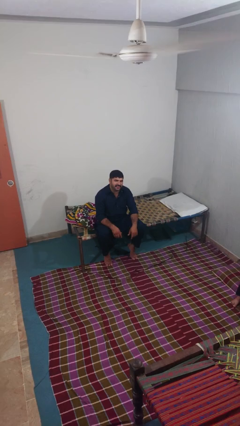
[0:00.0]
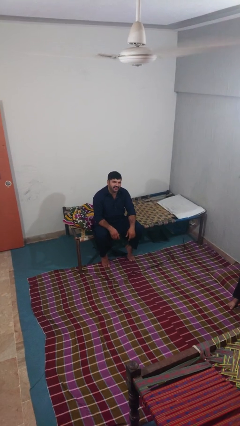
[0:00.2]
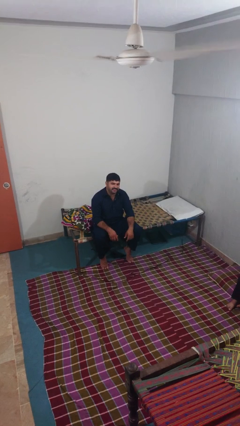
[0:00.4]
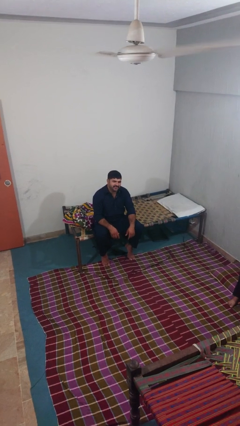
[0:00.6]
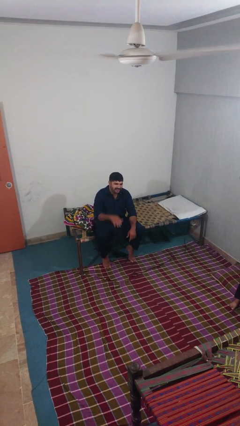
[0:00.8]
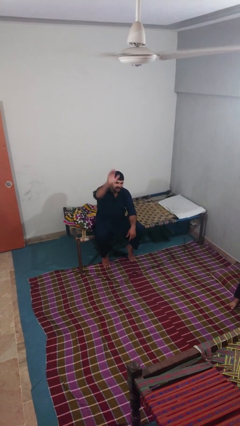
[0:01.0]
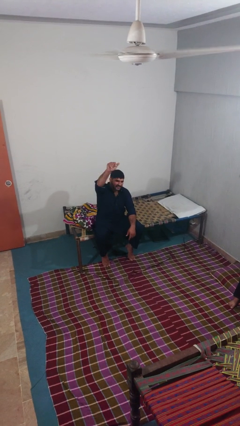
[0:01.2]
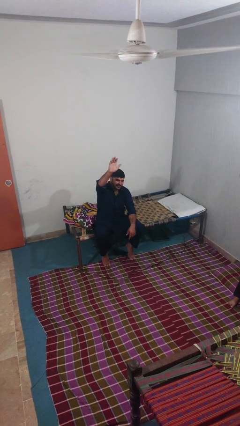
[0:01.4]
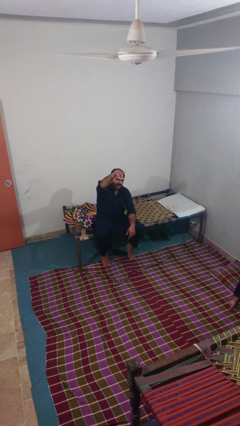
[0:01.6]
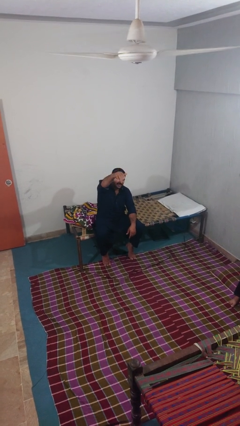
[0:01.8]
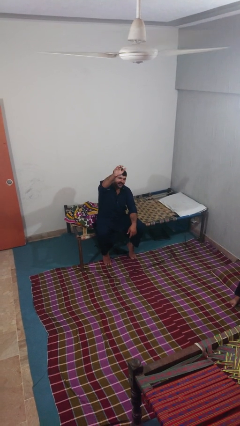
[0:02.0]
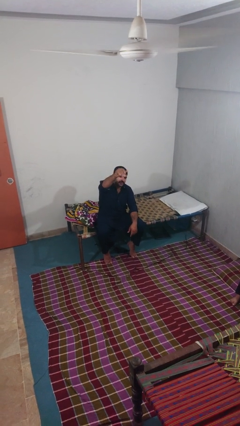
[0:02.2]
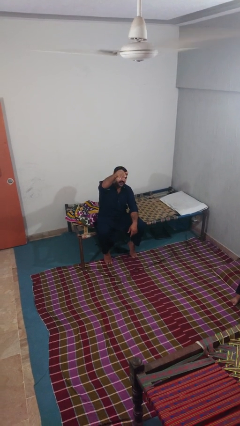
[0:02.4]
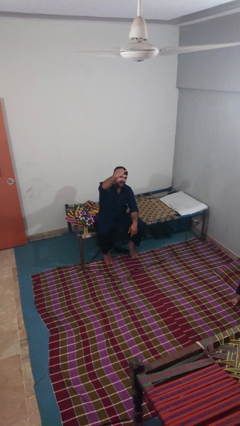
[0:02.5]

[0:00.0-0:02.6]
person gestures come here

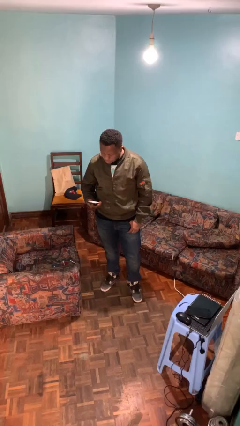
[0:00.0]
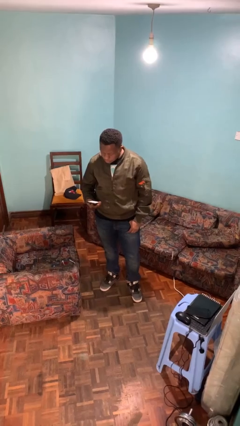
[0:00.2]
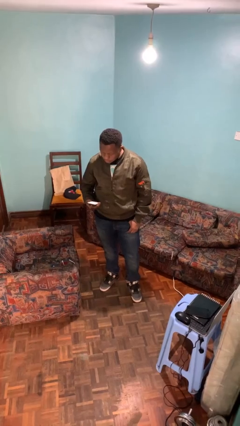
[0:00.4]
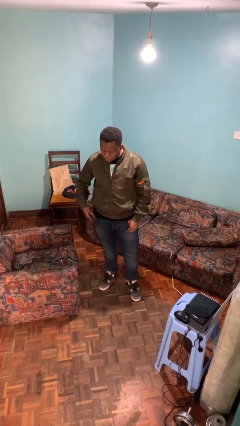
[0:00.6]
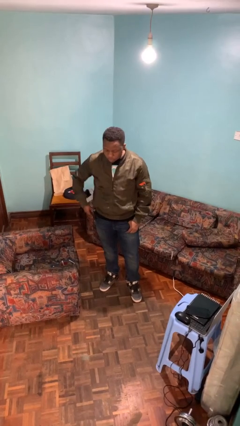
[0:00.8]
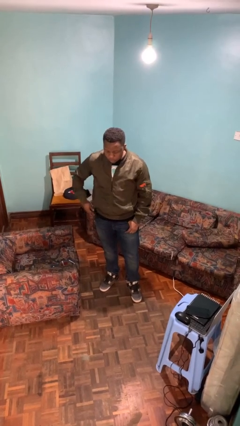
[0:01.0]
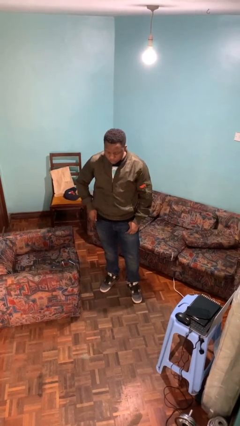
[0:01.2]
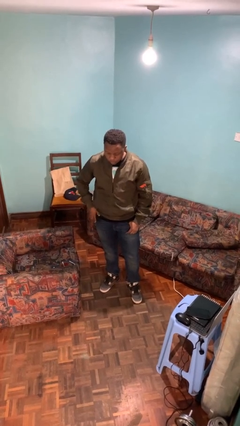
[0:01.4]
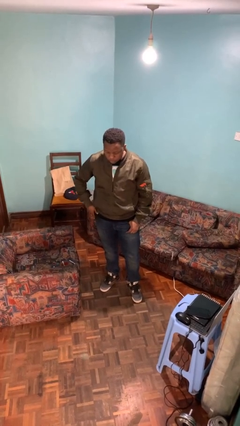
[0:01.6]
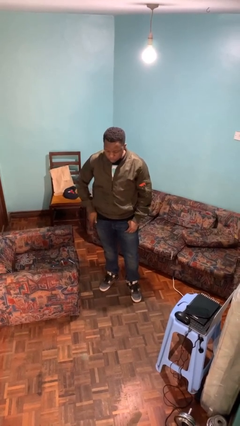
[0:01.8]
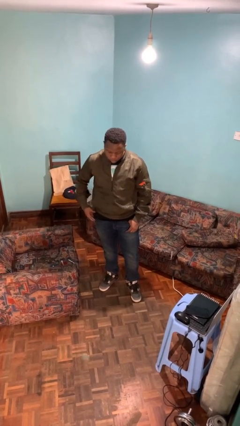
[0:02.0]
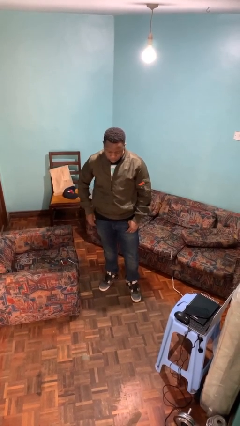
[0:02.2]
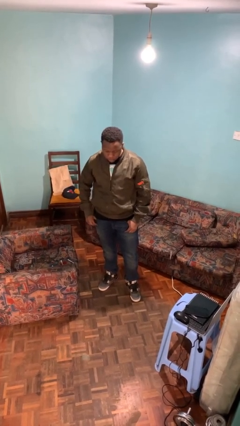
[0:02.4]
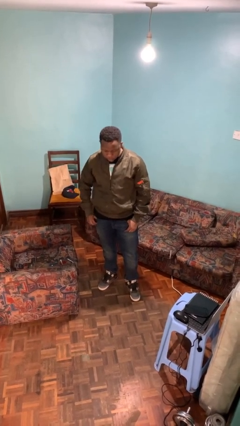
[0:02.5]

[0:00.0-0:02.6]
person puts phone into pocket

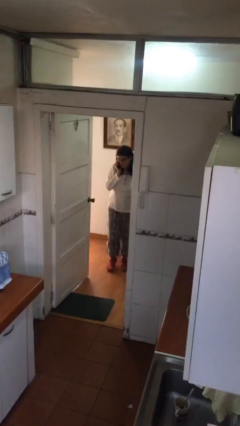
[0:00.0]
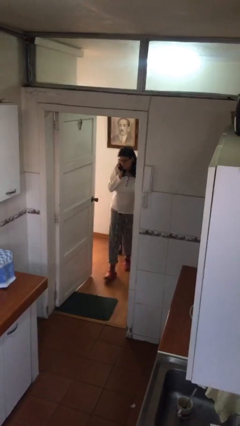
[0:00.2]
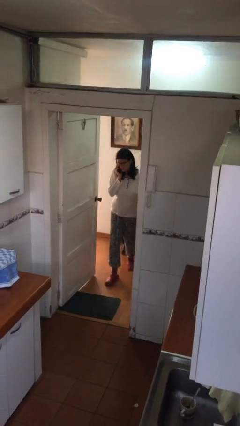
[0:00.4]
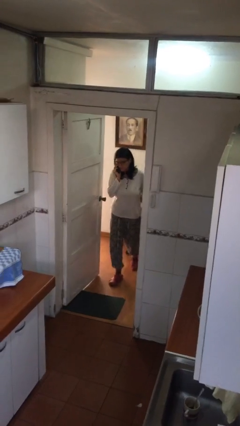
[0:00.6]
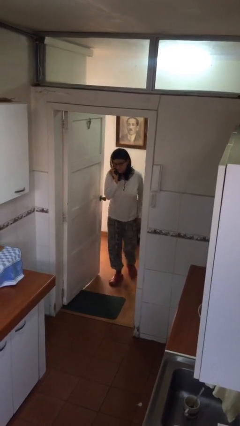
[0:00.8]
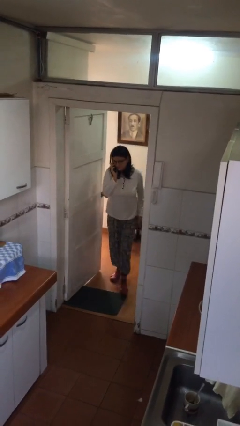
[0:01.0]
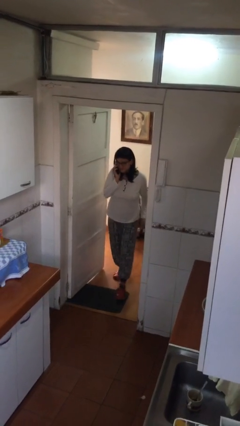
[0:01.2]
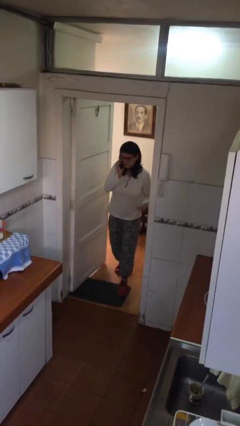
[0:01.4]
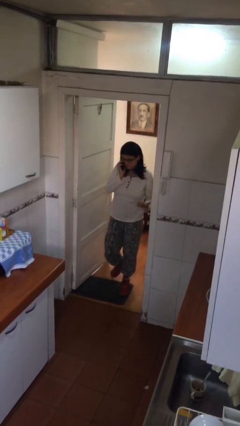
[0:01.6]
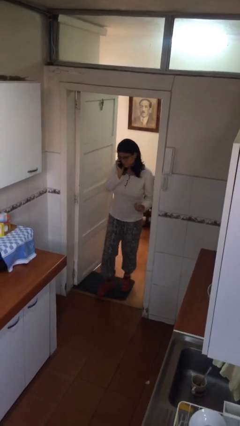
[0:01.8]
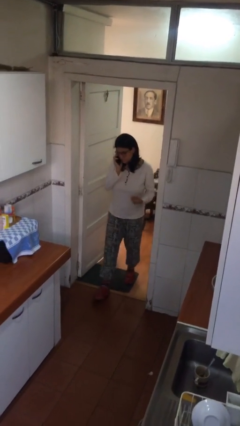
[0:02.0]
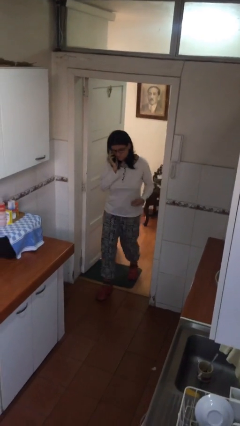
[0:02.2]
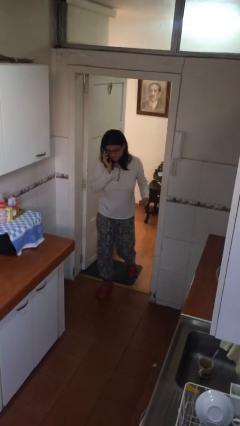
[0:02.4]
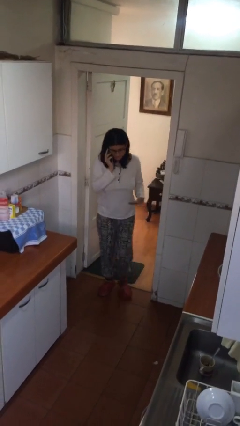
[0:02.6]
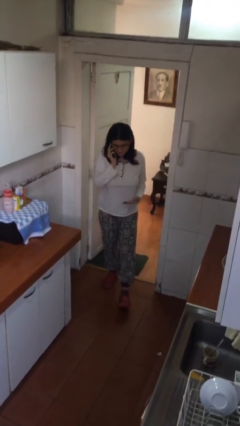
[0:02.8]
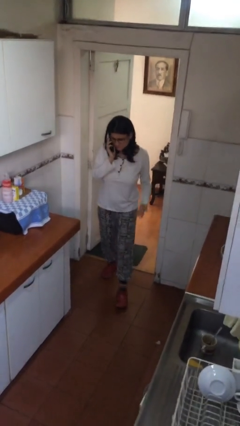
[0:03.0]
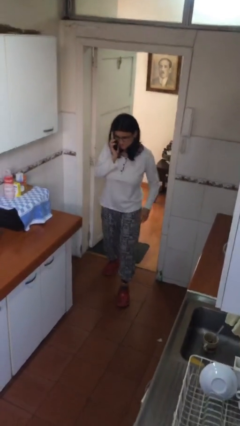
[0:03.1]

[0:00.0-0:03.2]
person enters scene through structure

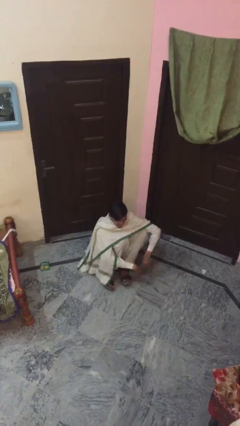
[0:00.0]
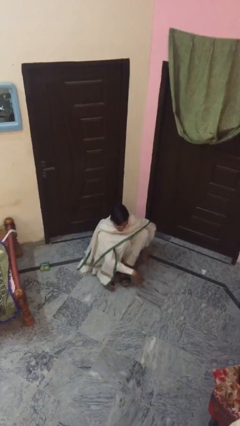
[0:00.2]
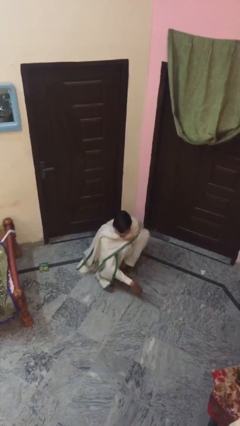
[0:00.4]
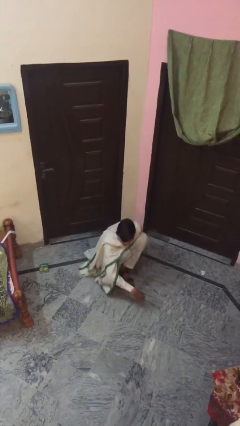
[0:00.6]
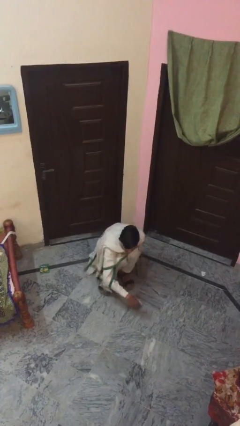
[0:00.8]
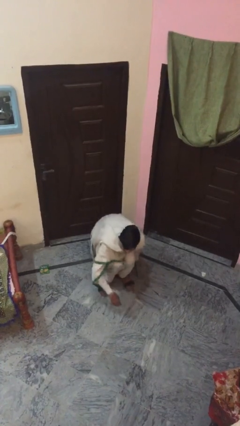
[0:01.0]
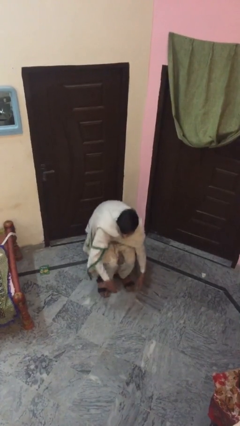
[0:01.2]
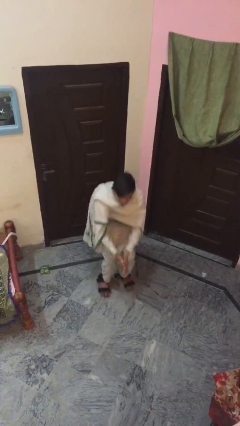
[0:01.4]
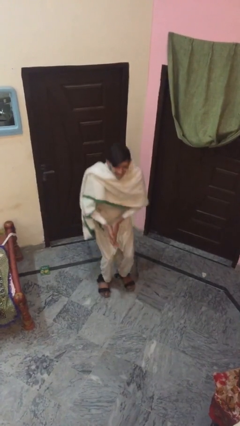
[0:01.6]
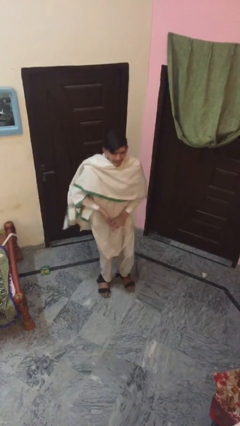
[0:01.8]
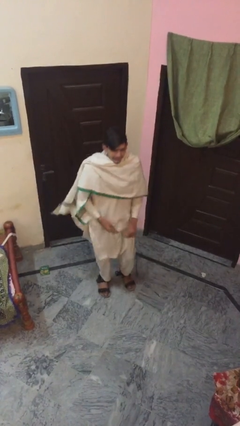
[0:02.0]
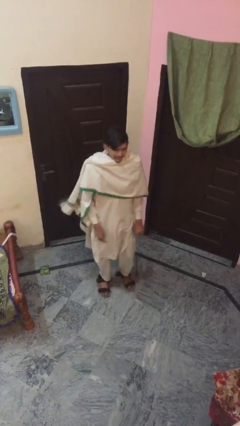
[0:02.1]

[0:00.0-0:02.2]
person stands up

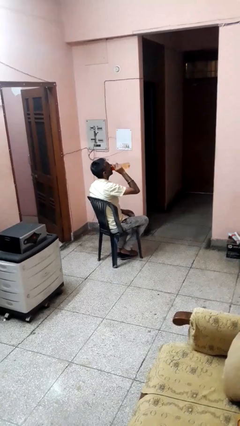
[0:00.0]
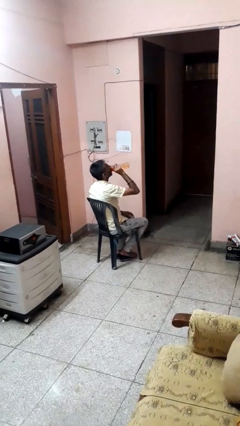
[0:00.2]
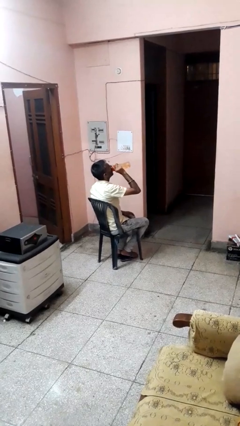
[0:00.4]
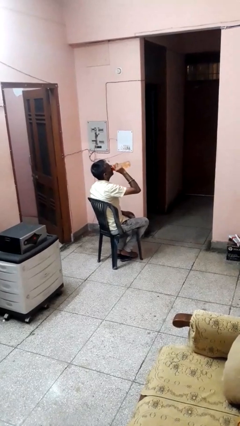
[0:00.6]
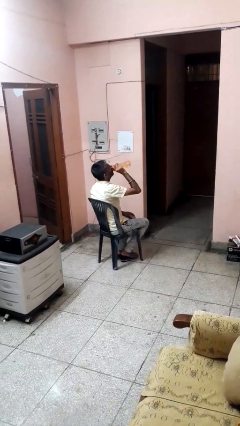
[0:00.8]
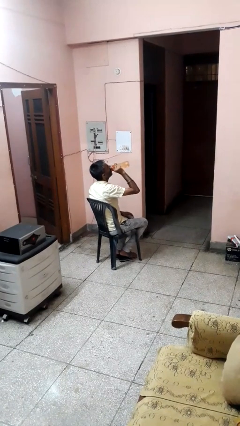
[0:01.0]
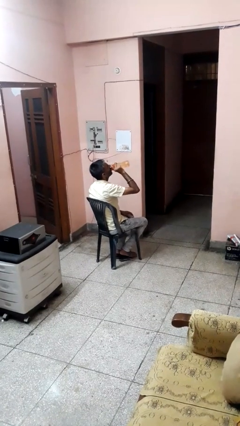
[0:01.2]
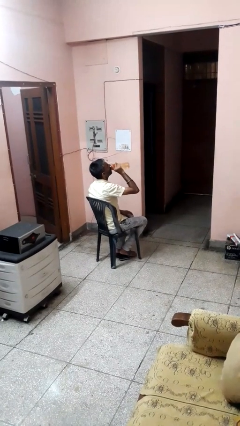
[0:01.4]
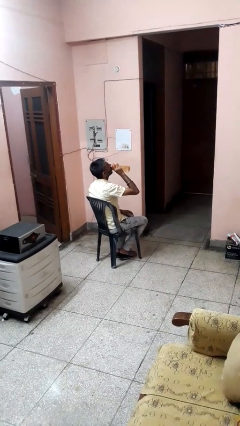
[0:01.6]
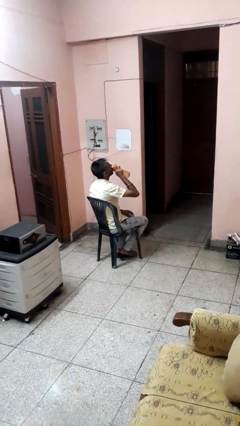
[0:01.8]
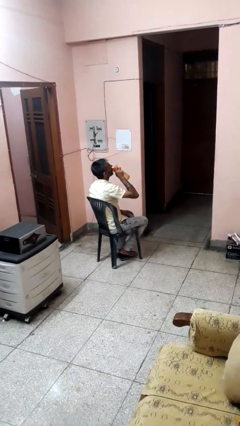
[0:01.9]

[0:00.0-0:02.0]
person drinks from bottle

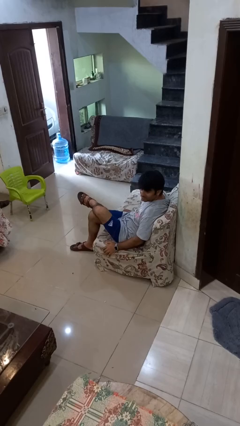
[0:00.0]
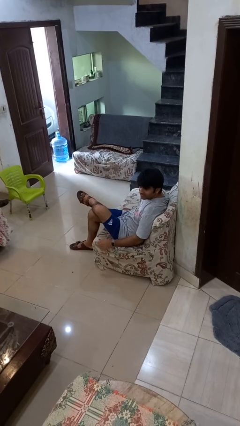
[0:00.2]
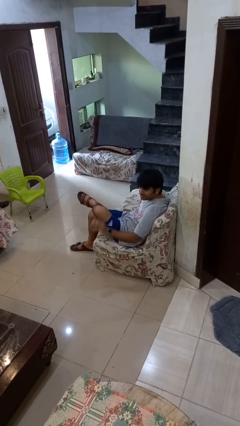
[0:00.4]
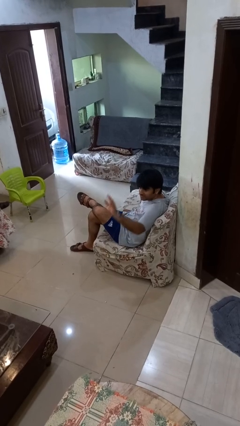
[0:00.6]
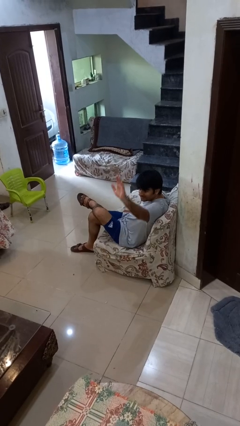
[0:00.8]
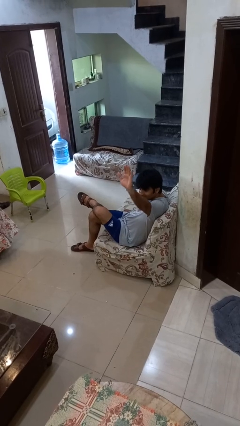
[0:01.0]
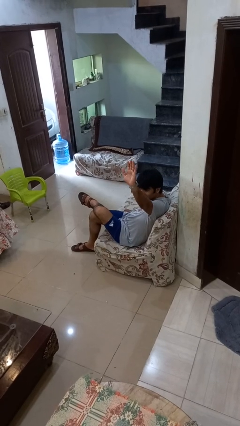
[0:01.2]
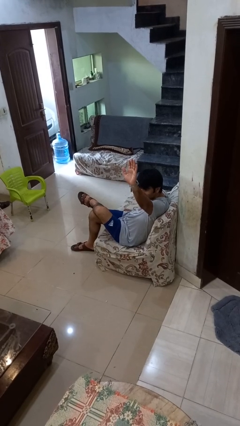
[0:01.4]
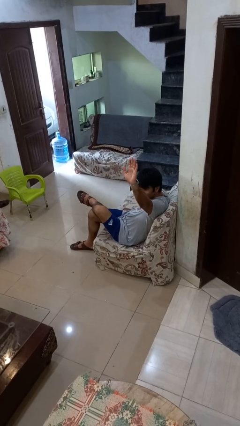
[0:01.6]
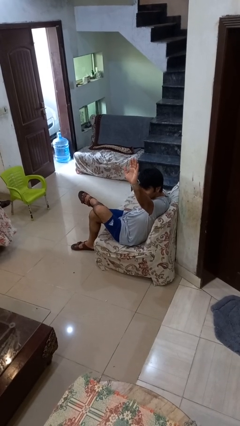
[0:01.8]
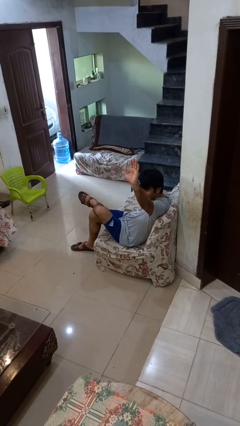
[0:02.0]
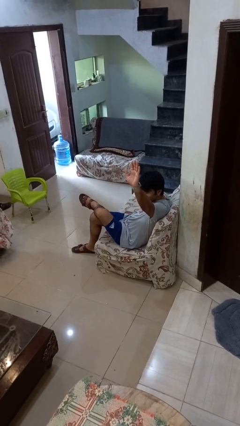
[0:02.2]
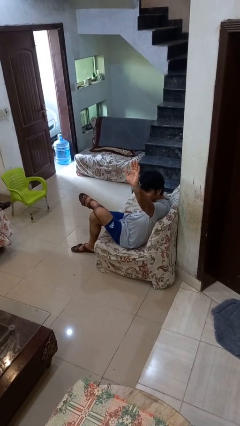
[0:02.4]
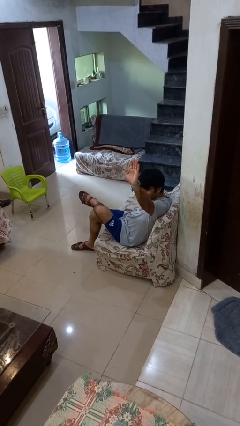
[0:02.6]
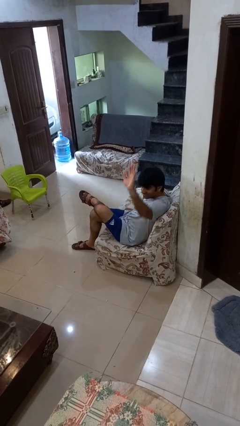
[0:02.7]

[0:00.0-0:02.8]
person gestures raise hand

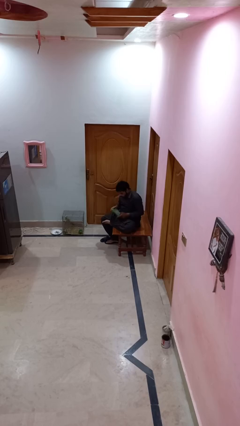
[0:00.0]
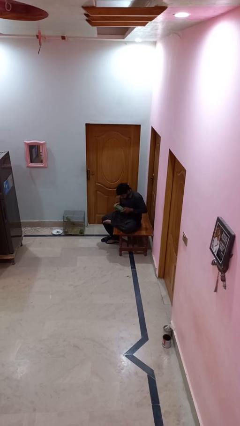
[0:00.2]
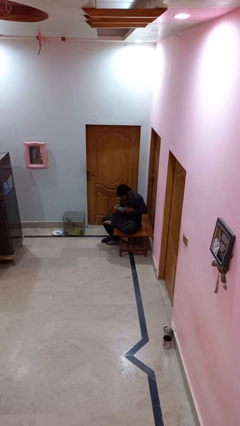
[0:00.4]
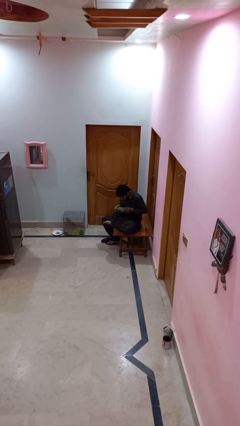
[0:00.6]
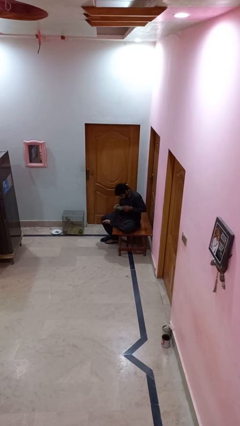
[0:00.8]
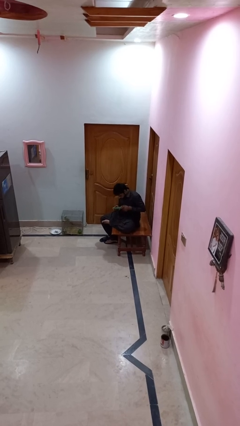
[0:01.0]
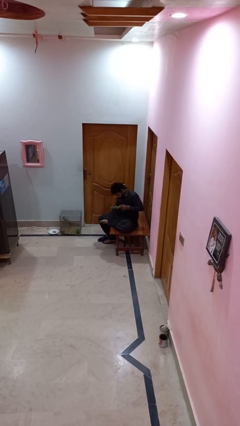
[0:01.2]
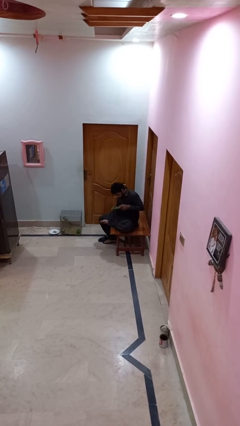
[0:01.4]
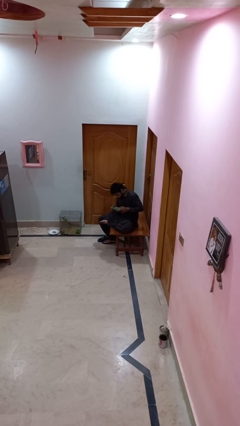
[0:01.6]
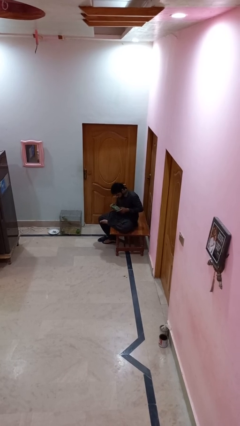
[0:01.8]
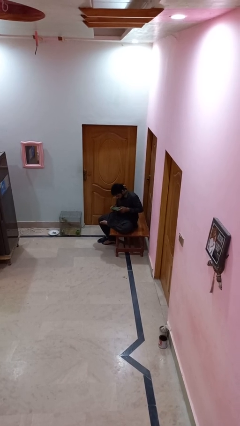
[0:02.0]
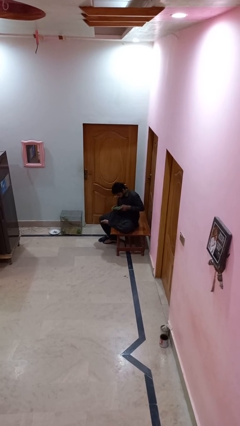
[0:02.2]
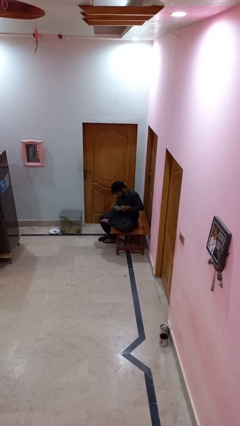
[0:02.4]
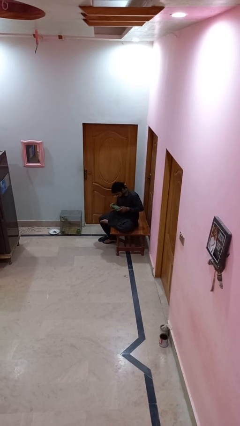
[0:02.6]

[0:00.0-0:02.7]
person interacts with handheld game
